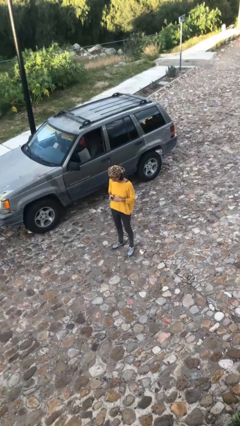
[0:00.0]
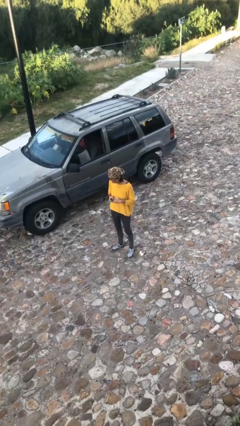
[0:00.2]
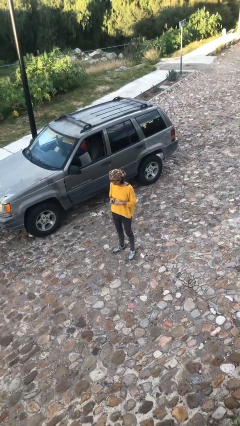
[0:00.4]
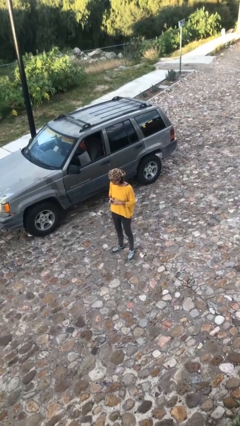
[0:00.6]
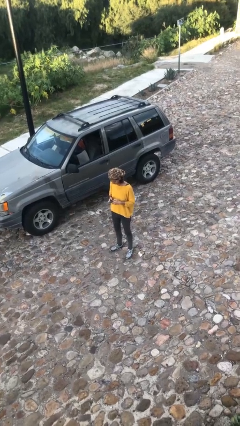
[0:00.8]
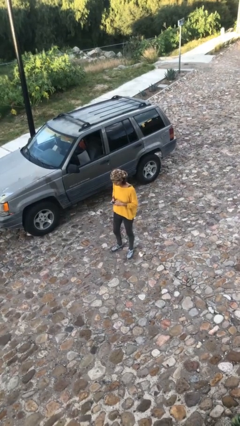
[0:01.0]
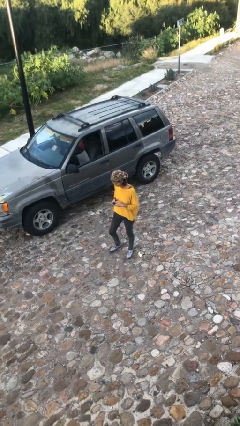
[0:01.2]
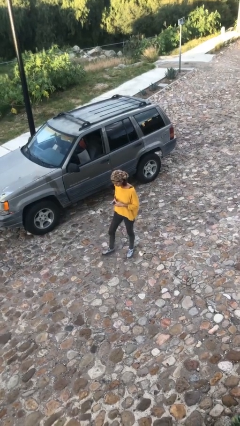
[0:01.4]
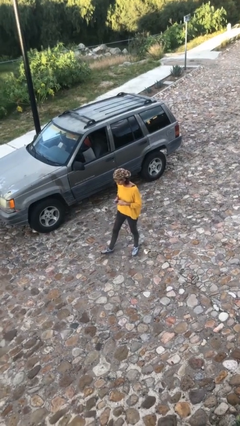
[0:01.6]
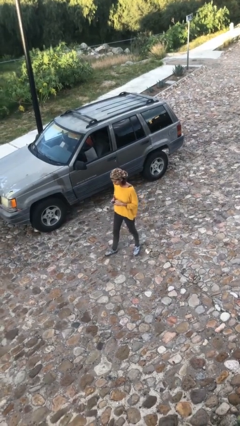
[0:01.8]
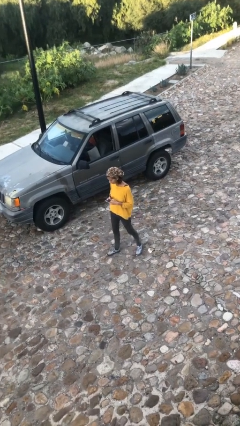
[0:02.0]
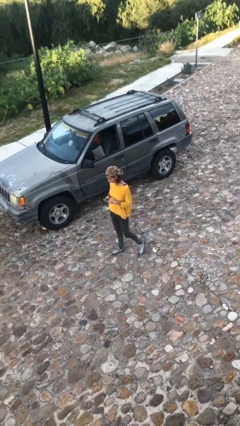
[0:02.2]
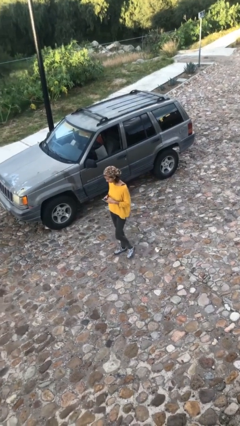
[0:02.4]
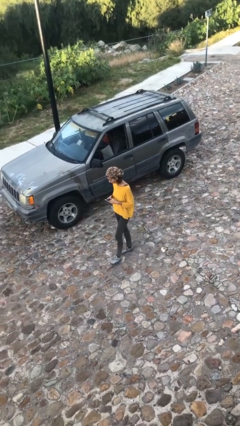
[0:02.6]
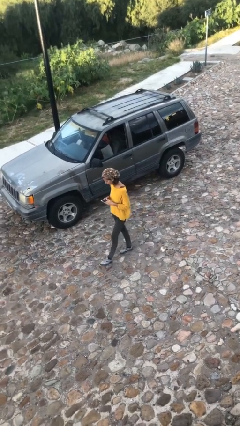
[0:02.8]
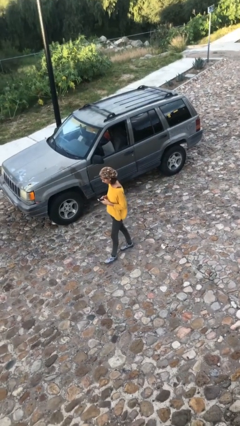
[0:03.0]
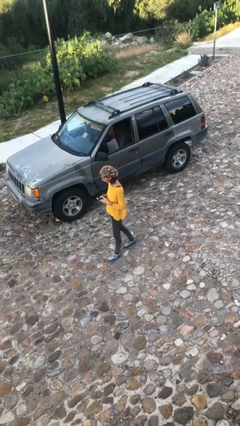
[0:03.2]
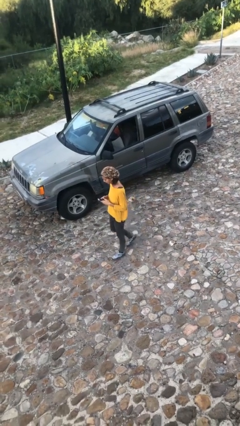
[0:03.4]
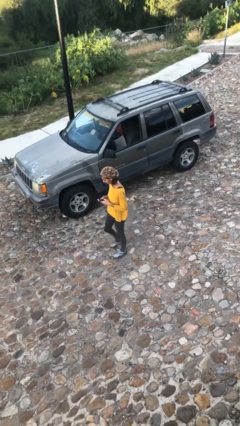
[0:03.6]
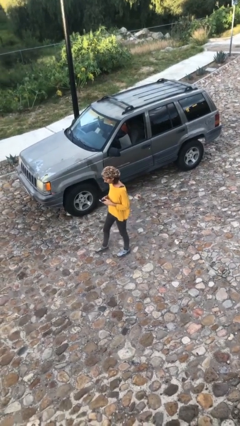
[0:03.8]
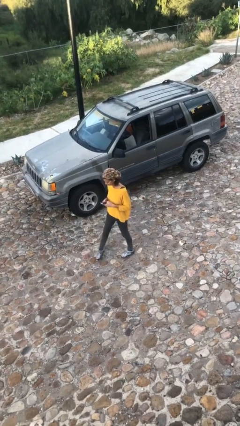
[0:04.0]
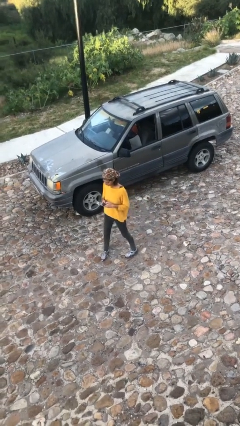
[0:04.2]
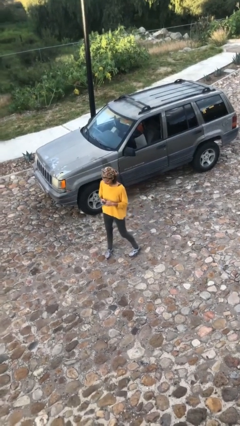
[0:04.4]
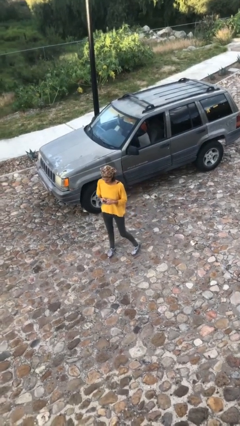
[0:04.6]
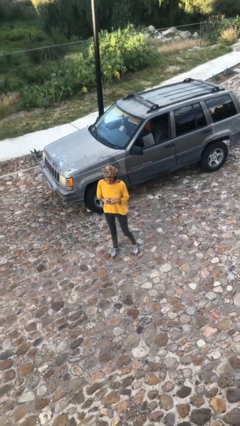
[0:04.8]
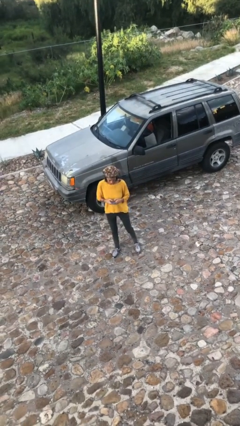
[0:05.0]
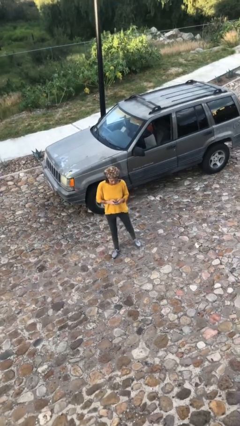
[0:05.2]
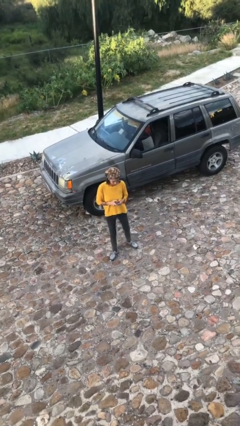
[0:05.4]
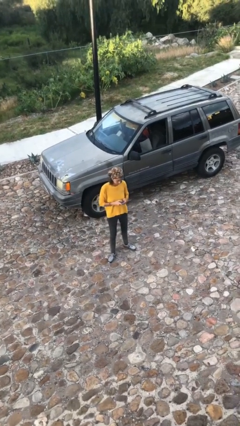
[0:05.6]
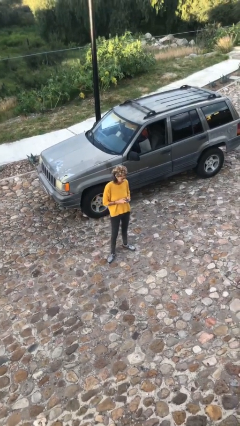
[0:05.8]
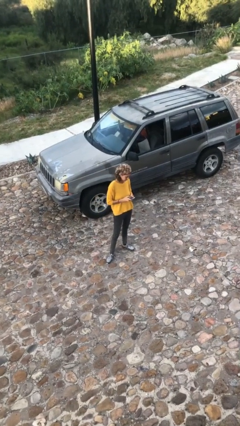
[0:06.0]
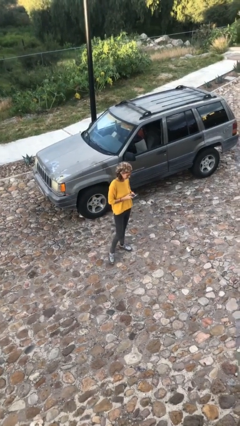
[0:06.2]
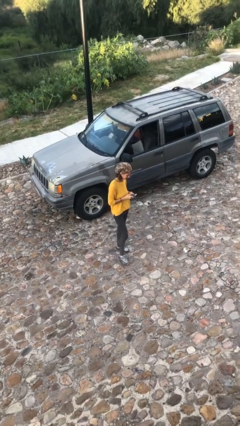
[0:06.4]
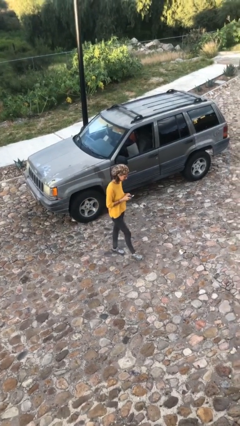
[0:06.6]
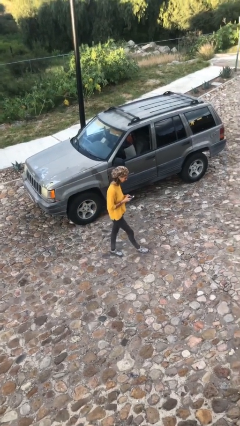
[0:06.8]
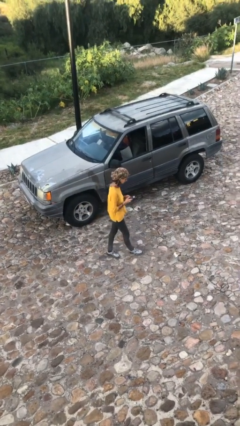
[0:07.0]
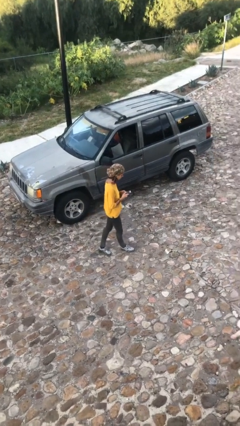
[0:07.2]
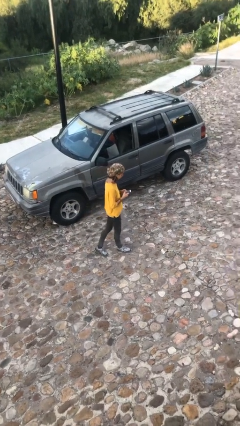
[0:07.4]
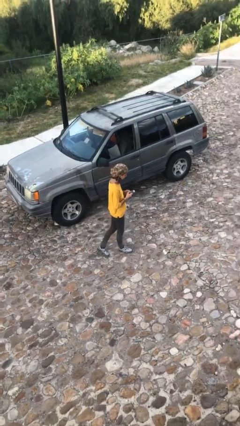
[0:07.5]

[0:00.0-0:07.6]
person texts on phone

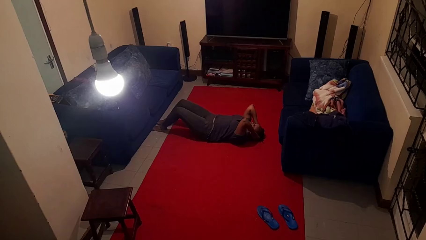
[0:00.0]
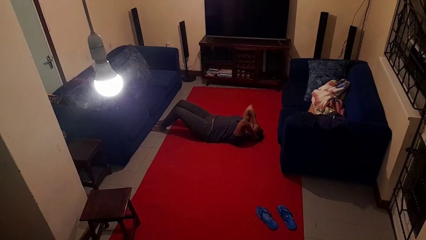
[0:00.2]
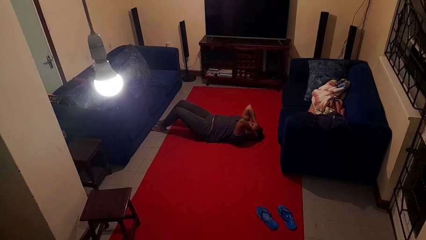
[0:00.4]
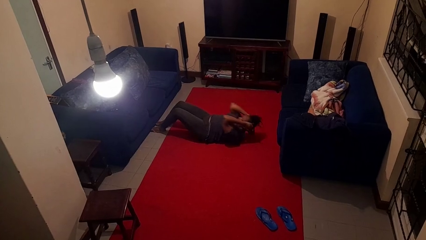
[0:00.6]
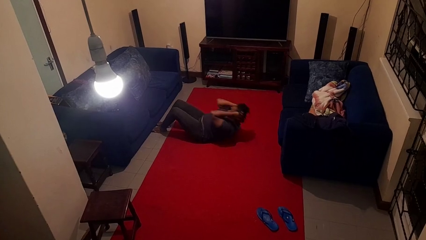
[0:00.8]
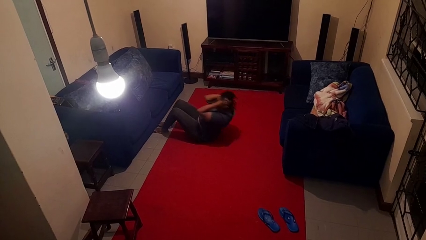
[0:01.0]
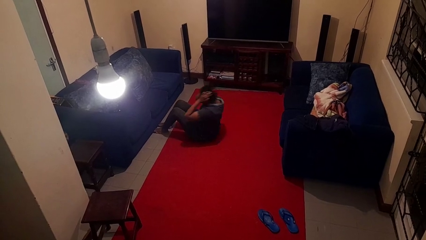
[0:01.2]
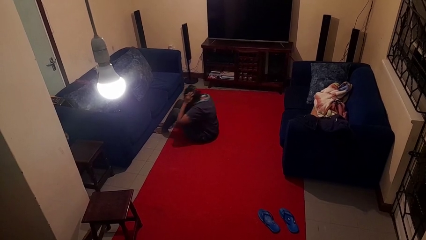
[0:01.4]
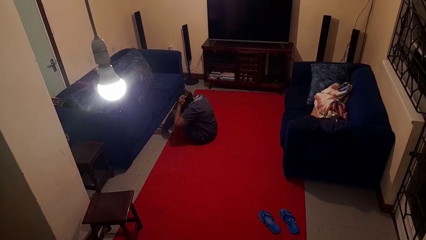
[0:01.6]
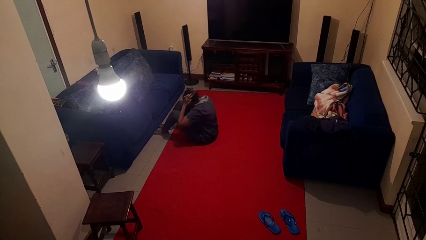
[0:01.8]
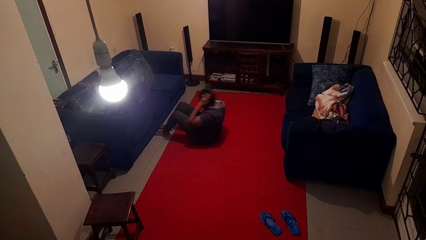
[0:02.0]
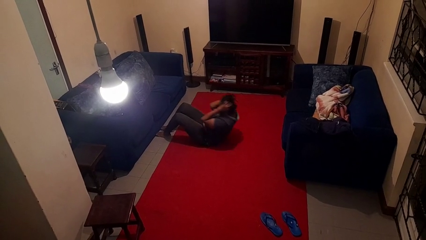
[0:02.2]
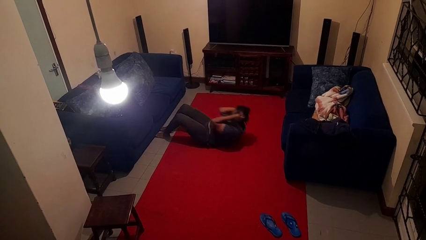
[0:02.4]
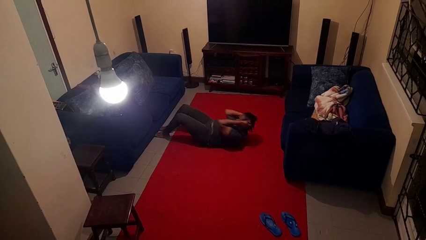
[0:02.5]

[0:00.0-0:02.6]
person exercises with situp

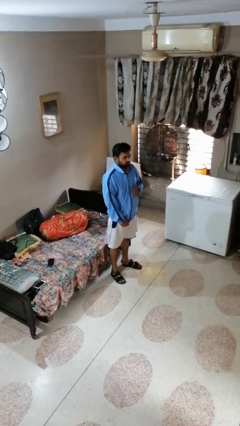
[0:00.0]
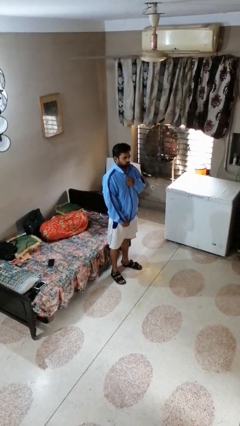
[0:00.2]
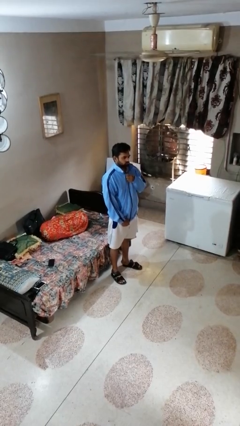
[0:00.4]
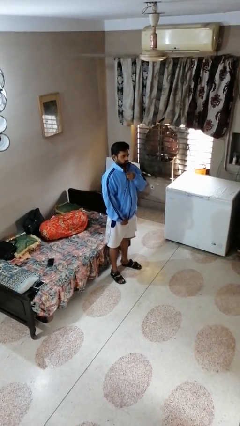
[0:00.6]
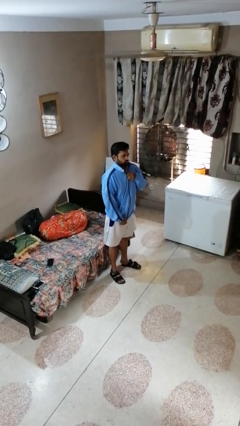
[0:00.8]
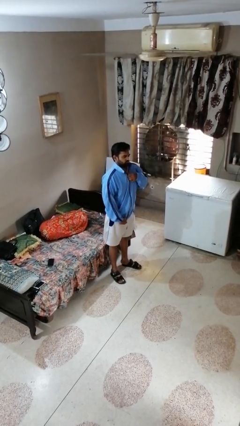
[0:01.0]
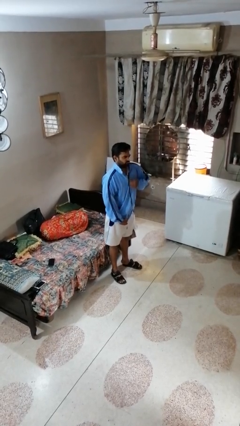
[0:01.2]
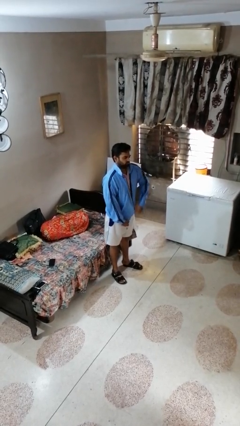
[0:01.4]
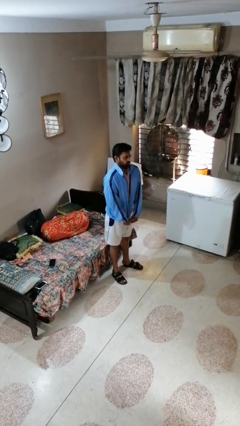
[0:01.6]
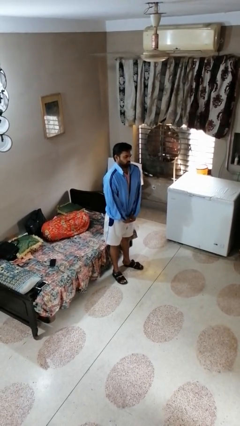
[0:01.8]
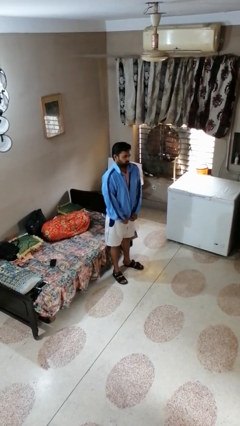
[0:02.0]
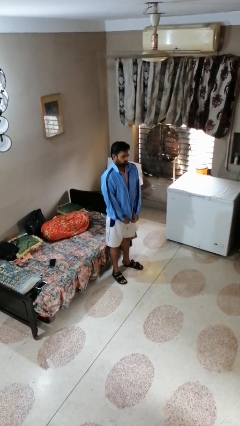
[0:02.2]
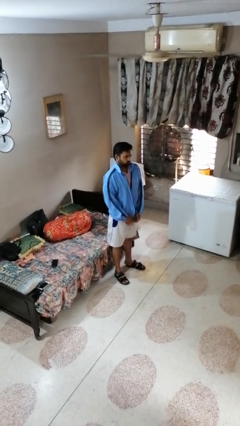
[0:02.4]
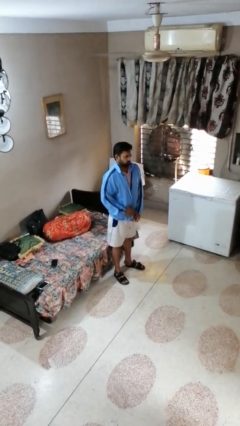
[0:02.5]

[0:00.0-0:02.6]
person unzips jacket

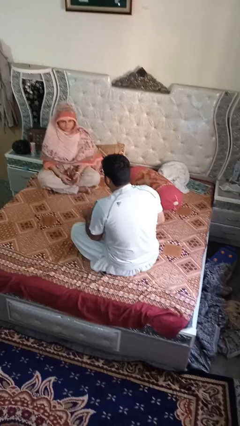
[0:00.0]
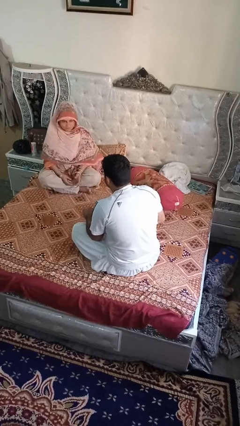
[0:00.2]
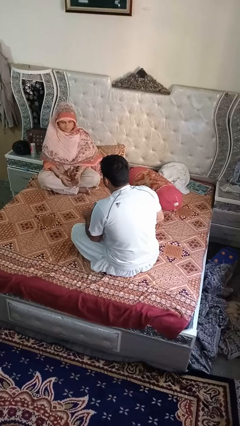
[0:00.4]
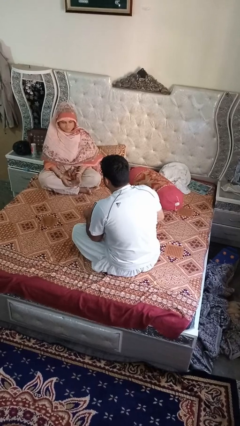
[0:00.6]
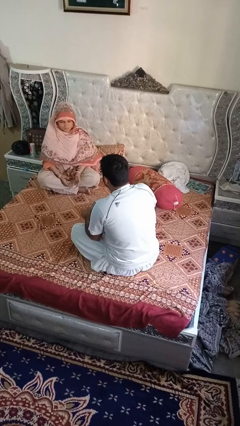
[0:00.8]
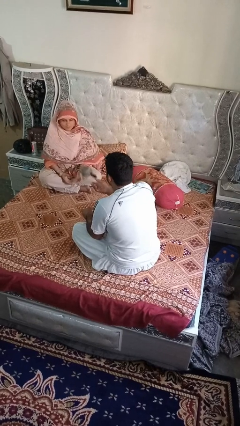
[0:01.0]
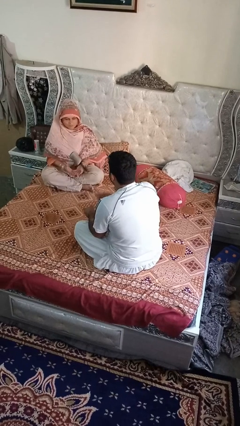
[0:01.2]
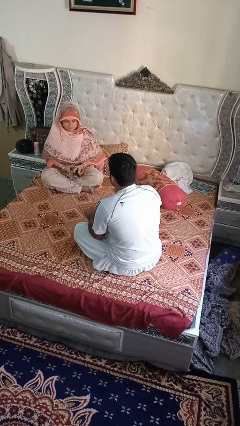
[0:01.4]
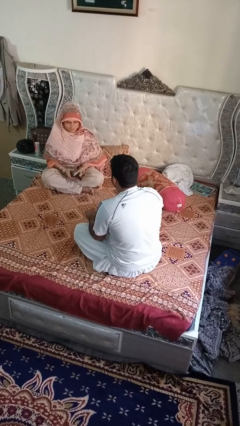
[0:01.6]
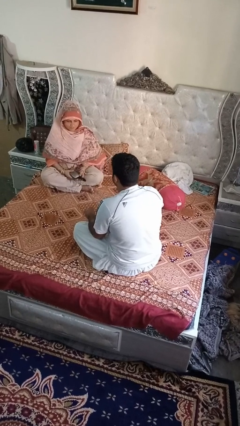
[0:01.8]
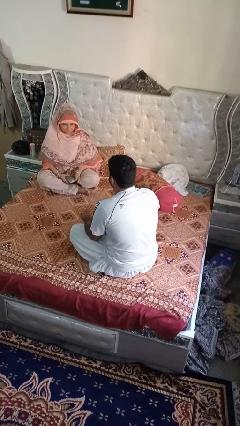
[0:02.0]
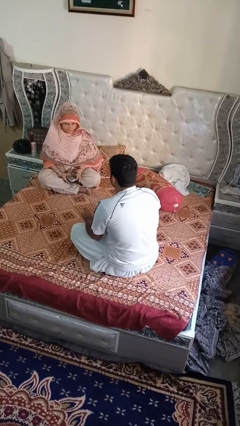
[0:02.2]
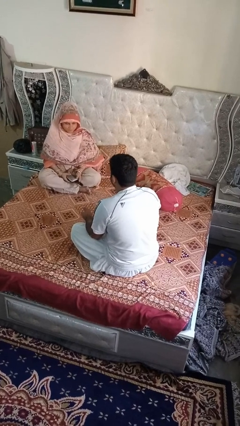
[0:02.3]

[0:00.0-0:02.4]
person throws object to person

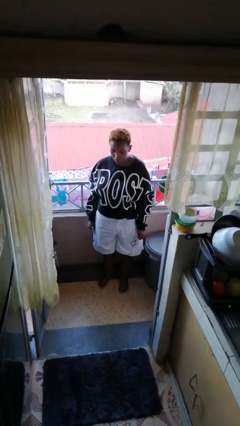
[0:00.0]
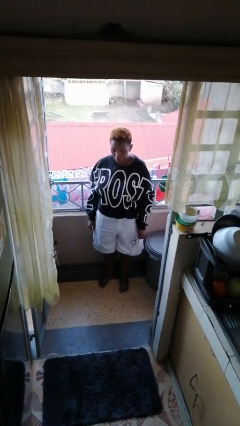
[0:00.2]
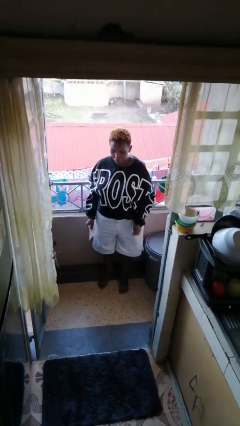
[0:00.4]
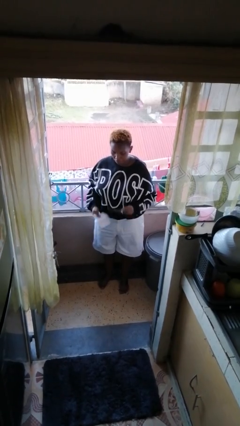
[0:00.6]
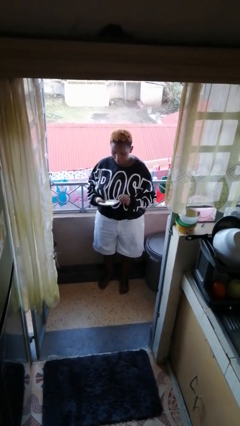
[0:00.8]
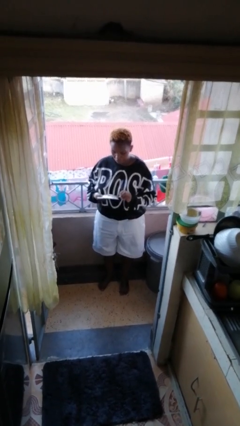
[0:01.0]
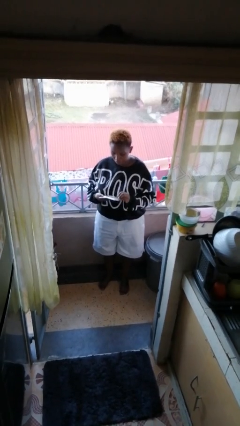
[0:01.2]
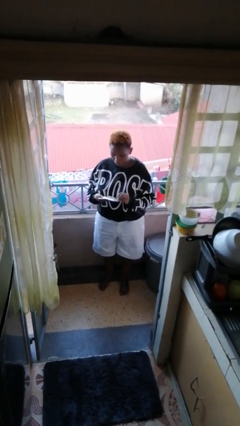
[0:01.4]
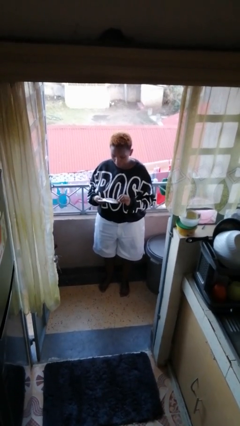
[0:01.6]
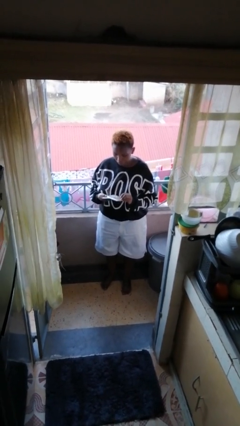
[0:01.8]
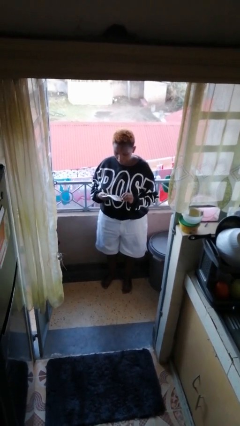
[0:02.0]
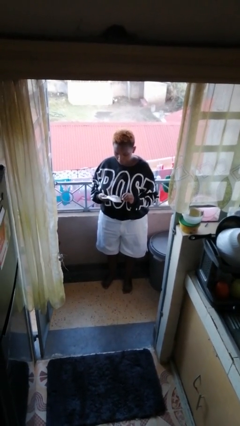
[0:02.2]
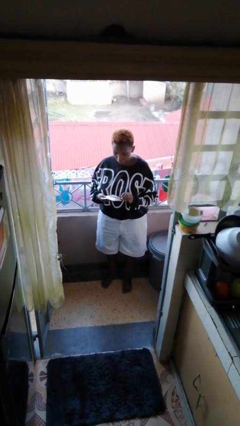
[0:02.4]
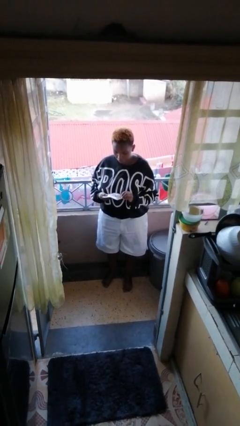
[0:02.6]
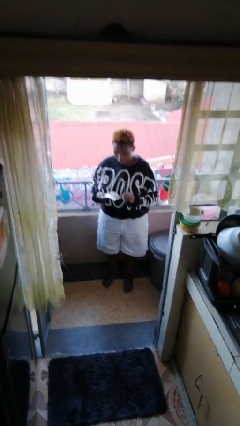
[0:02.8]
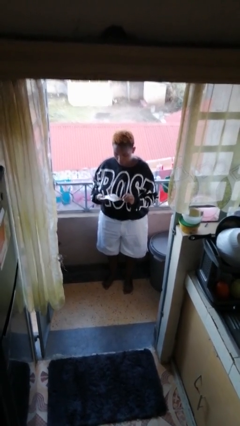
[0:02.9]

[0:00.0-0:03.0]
person cleans eyeglasses
